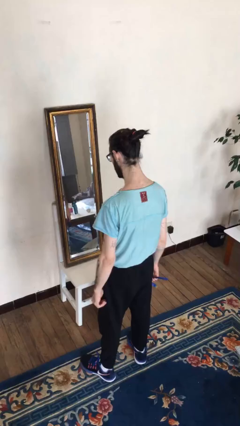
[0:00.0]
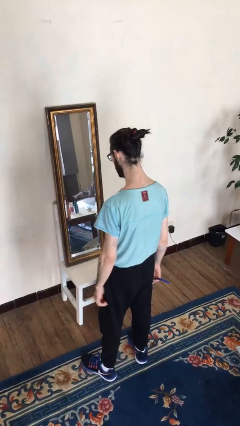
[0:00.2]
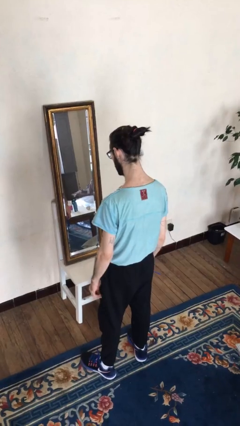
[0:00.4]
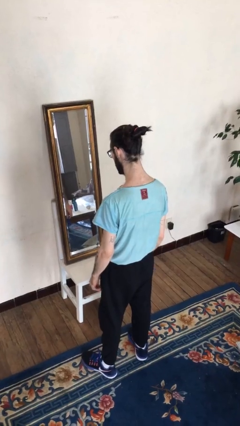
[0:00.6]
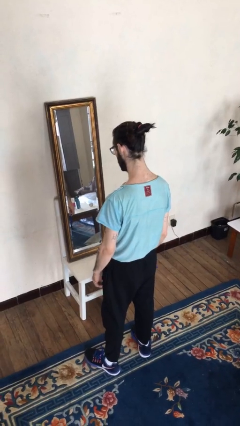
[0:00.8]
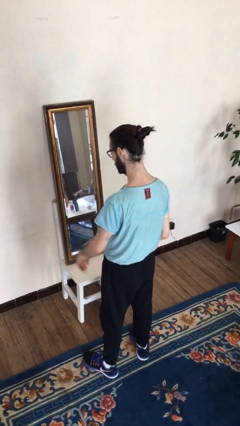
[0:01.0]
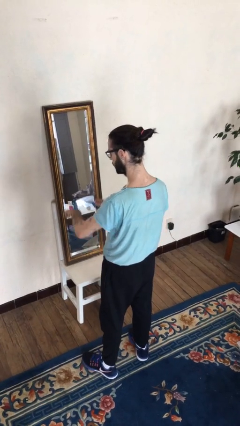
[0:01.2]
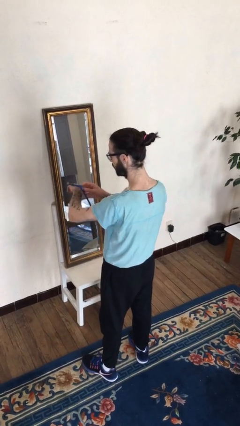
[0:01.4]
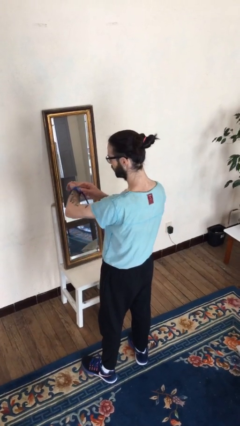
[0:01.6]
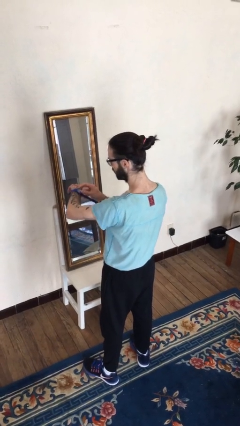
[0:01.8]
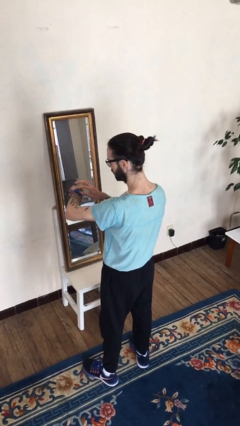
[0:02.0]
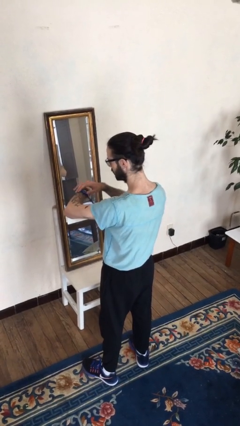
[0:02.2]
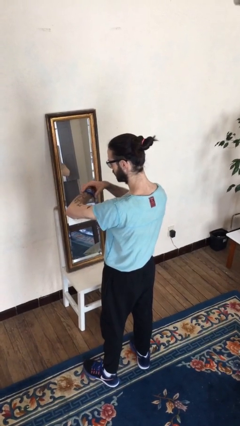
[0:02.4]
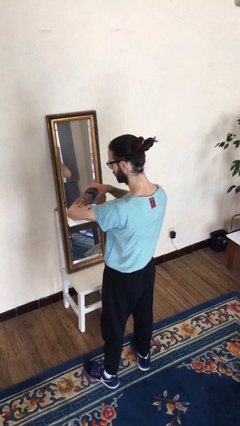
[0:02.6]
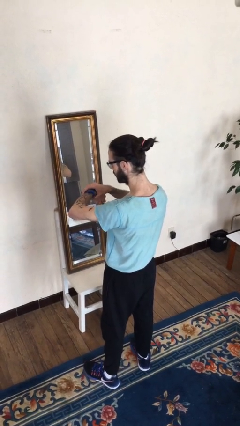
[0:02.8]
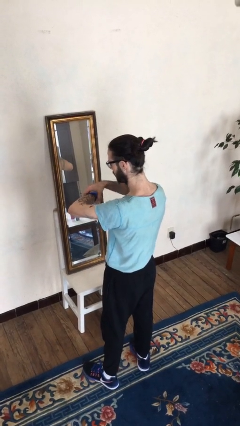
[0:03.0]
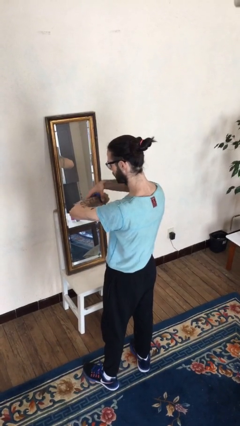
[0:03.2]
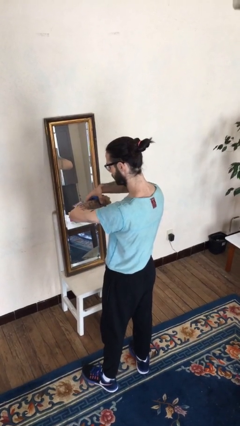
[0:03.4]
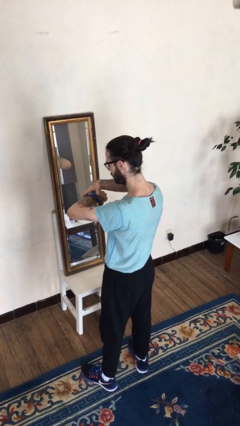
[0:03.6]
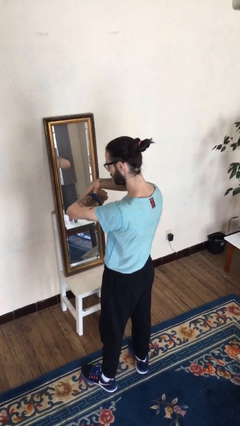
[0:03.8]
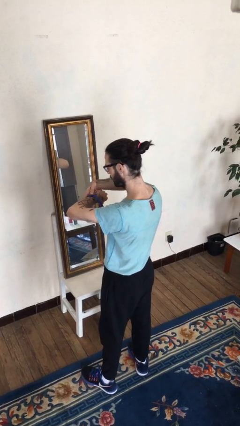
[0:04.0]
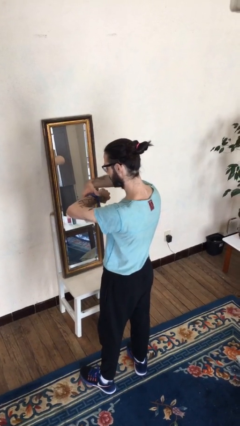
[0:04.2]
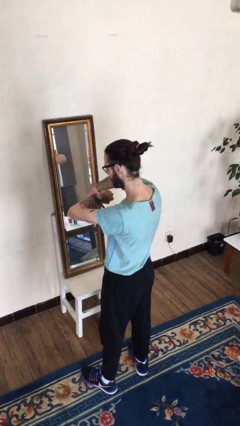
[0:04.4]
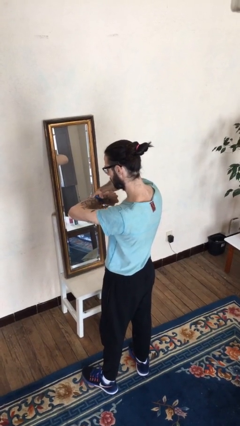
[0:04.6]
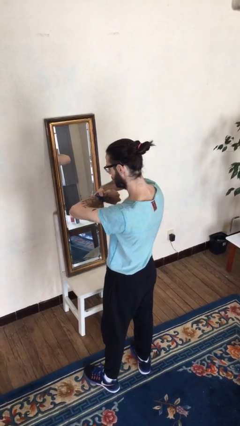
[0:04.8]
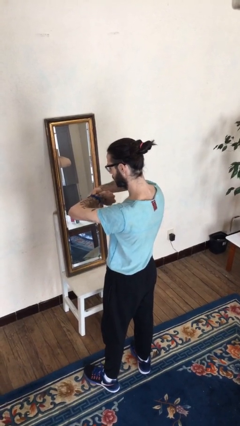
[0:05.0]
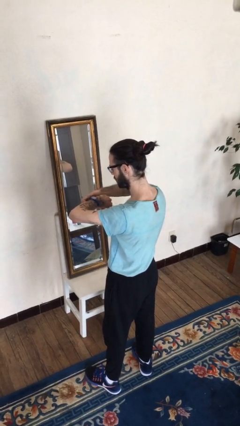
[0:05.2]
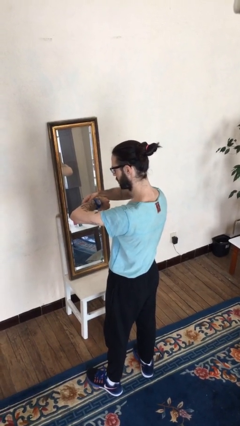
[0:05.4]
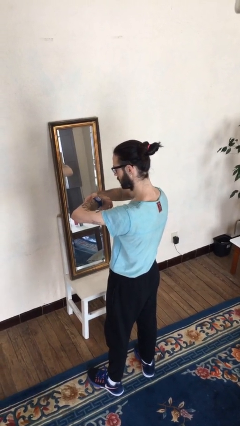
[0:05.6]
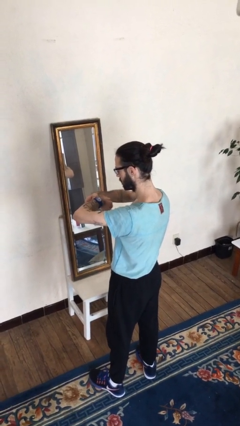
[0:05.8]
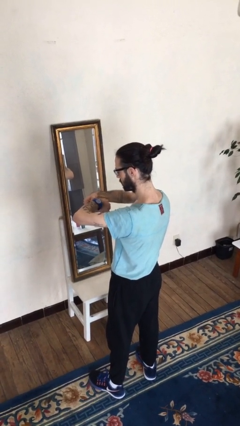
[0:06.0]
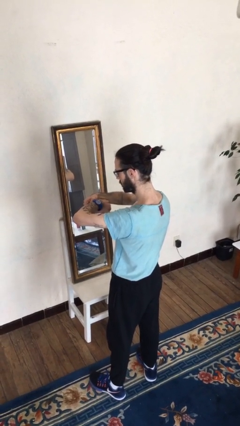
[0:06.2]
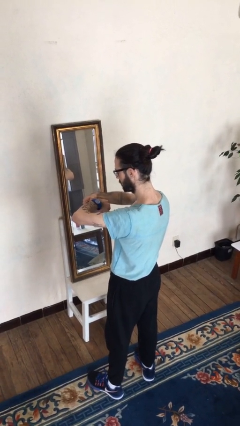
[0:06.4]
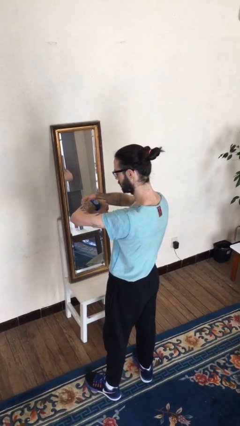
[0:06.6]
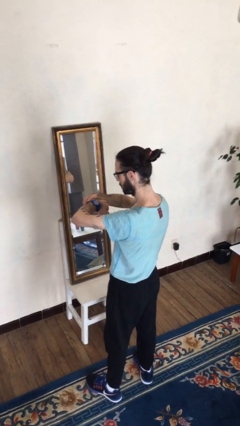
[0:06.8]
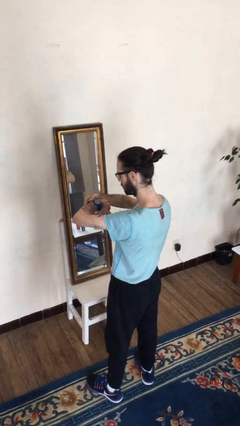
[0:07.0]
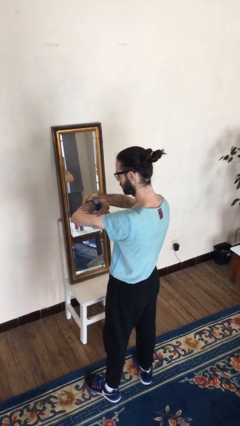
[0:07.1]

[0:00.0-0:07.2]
person puts on wristwatch

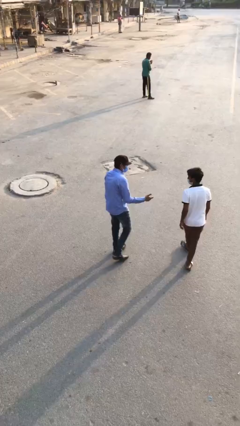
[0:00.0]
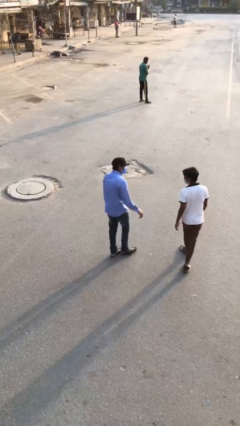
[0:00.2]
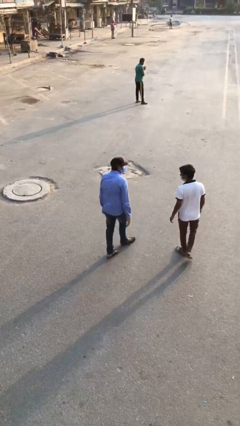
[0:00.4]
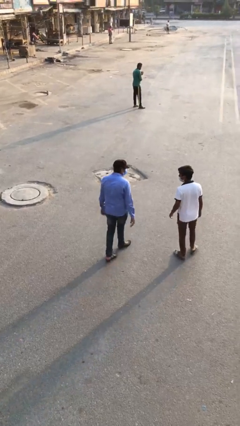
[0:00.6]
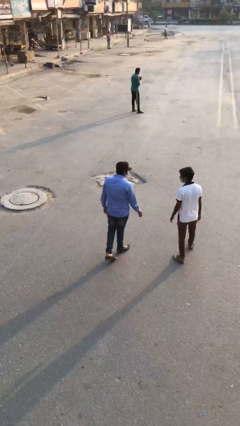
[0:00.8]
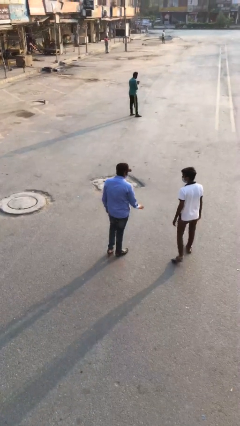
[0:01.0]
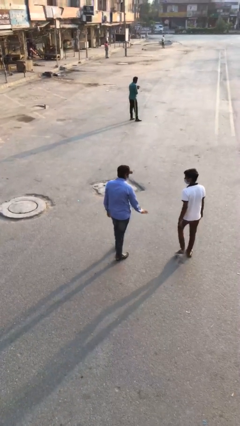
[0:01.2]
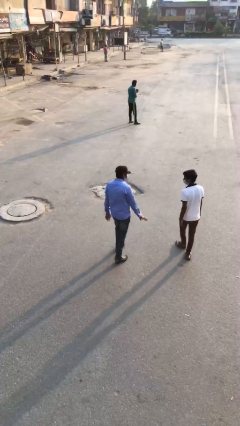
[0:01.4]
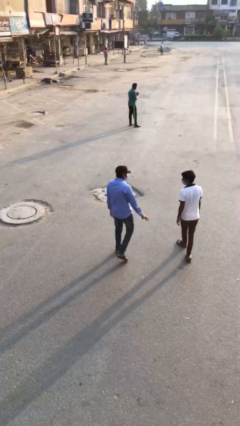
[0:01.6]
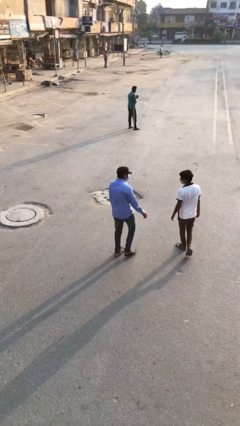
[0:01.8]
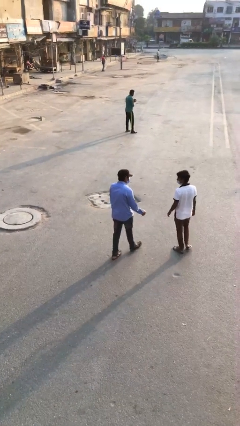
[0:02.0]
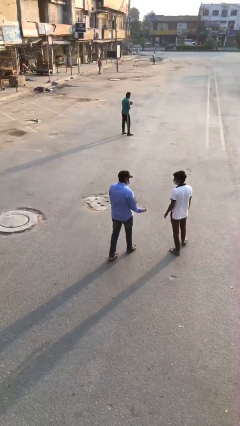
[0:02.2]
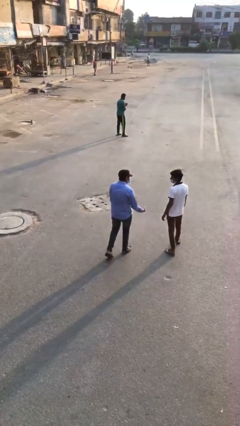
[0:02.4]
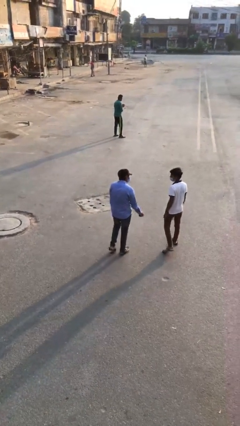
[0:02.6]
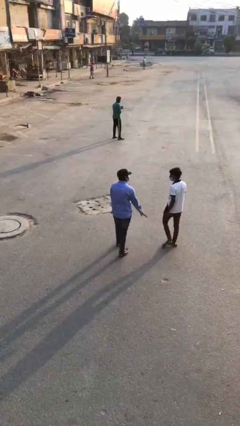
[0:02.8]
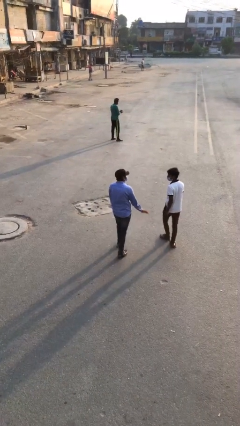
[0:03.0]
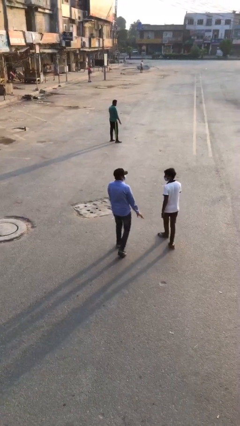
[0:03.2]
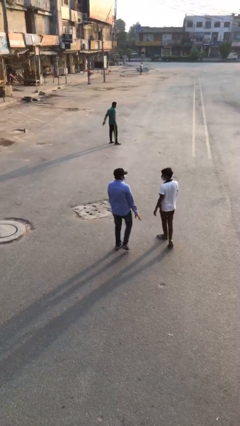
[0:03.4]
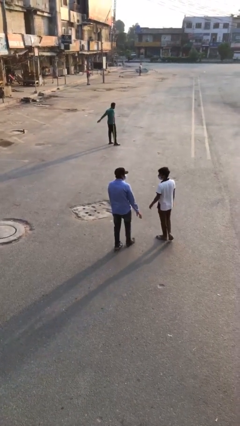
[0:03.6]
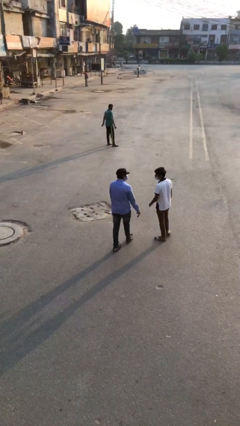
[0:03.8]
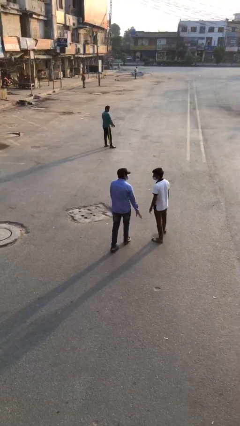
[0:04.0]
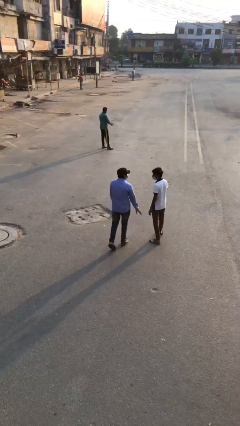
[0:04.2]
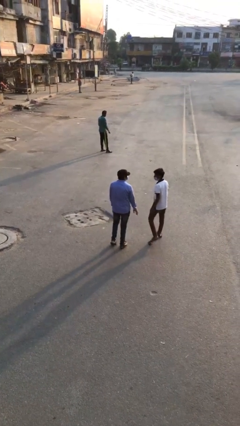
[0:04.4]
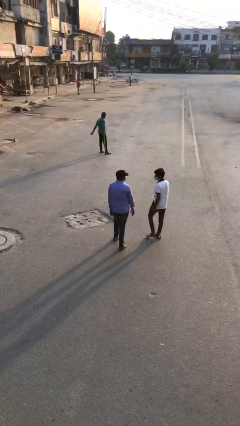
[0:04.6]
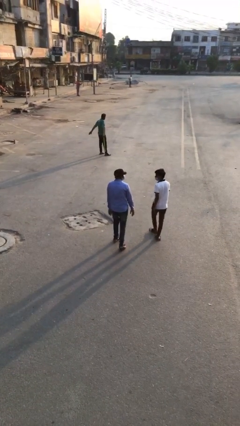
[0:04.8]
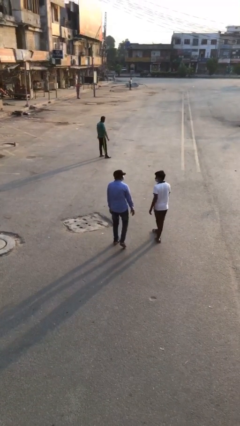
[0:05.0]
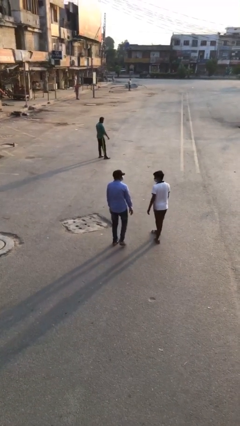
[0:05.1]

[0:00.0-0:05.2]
person talks to person

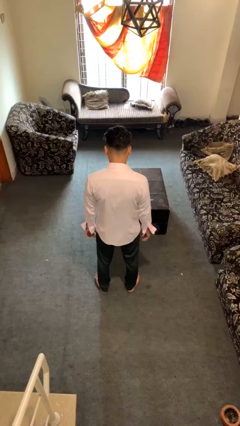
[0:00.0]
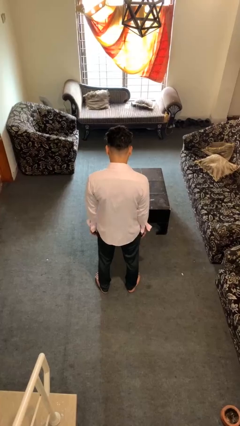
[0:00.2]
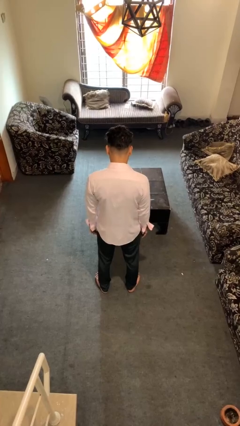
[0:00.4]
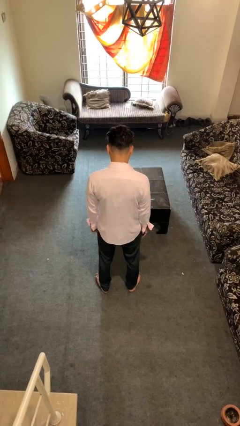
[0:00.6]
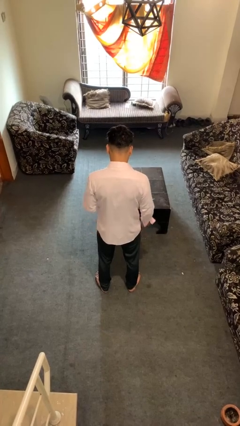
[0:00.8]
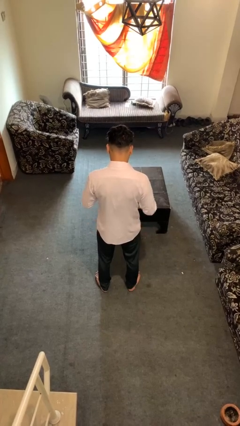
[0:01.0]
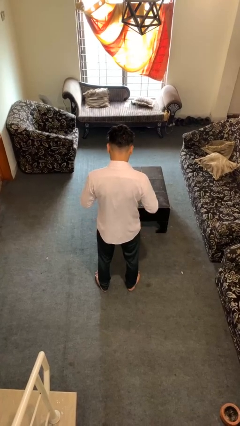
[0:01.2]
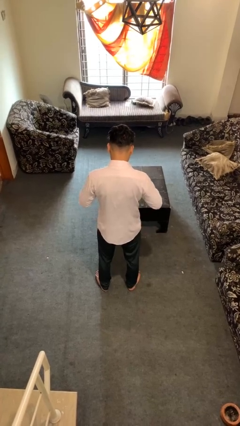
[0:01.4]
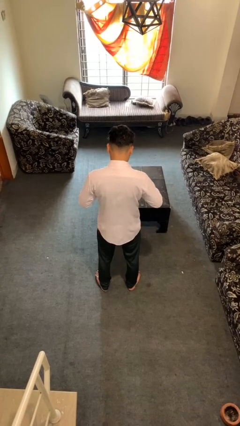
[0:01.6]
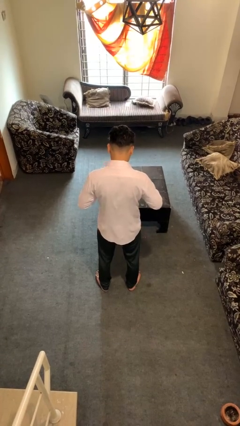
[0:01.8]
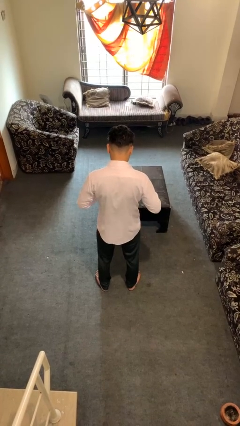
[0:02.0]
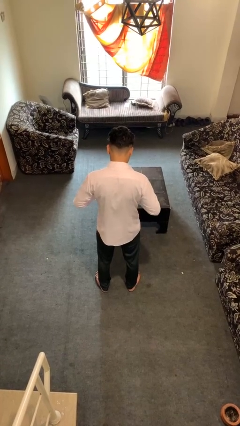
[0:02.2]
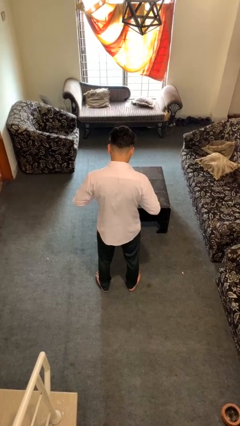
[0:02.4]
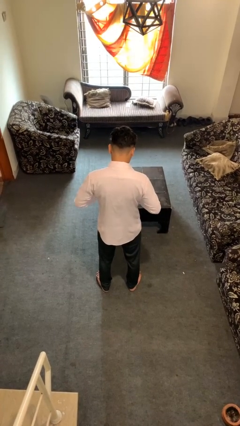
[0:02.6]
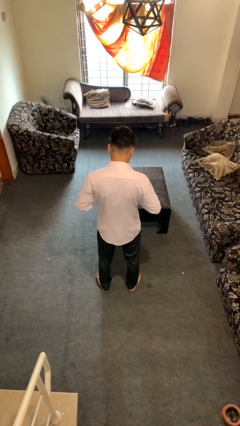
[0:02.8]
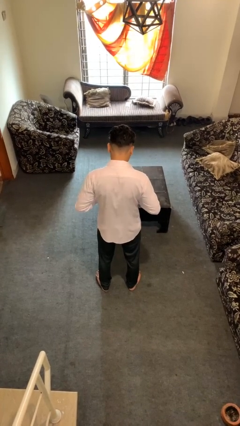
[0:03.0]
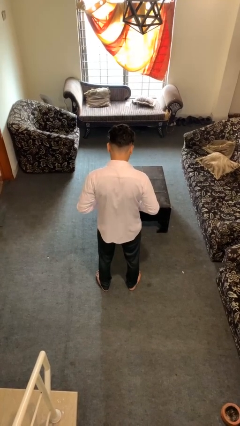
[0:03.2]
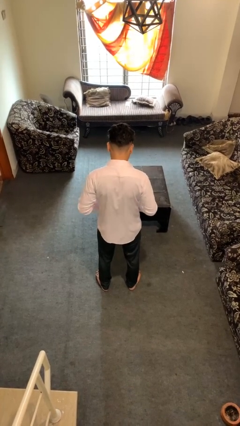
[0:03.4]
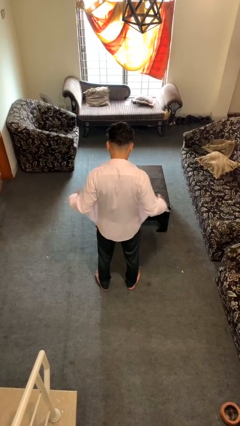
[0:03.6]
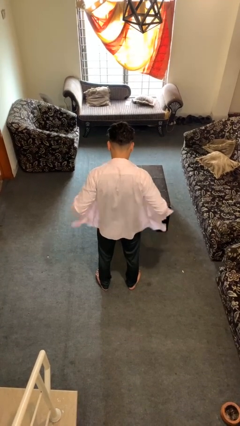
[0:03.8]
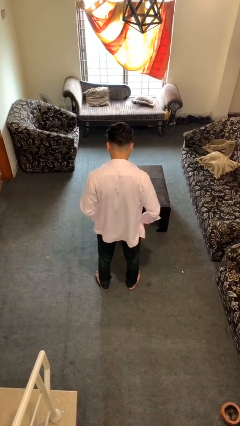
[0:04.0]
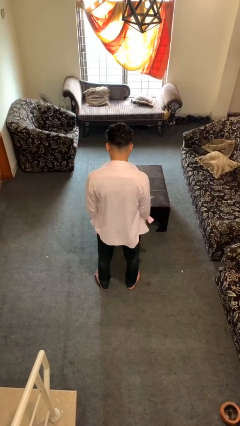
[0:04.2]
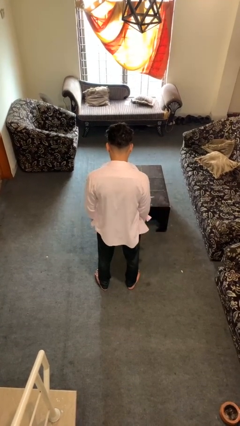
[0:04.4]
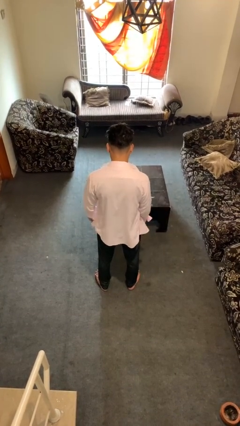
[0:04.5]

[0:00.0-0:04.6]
person unbuttons shirt

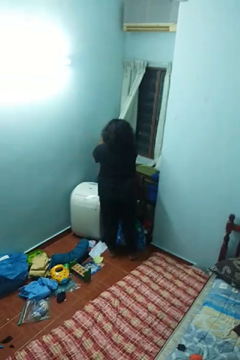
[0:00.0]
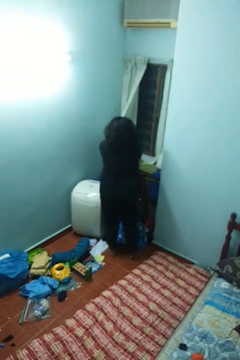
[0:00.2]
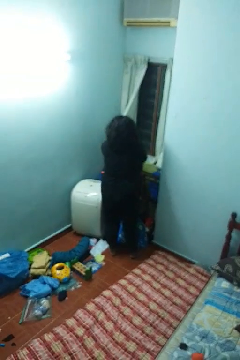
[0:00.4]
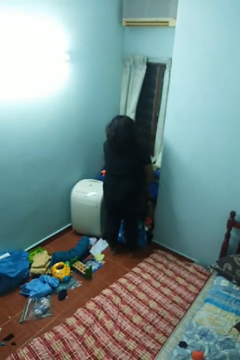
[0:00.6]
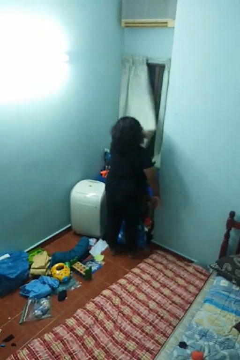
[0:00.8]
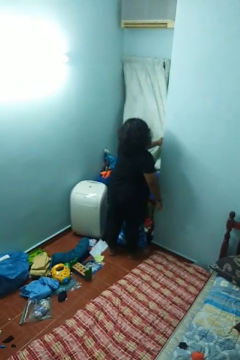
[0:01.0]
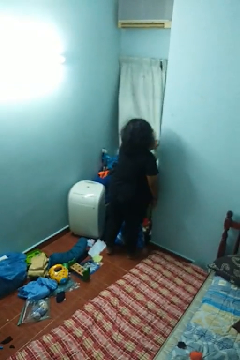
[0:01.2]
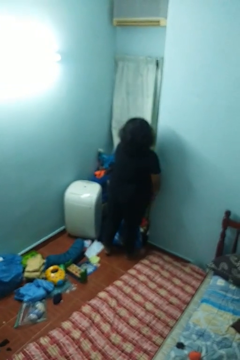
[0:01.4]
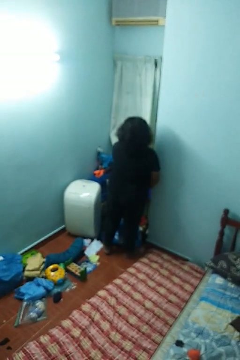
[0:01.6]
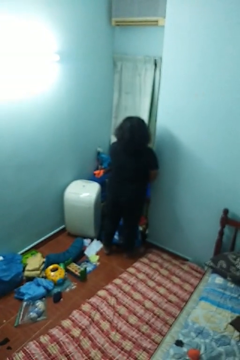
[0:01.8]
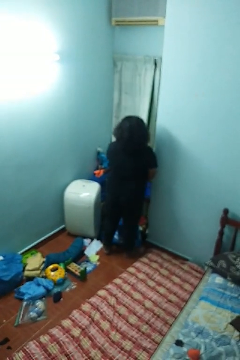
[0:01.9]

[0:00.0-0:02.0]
person closes curtains
